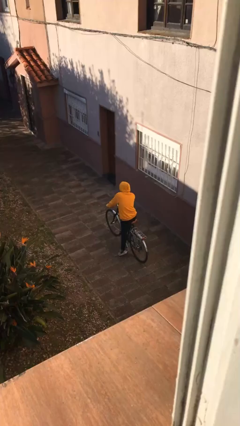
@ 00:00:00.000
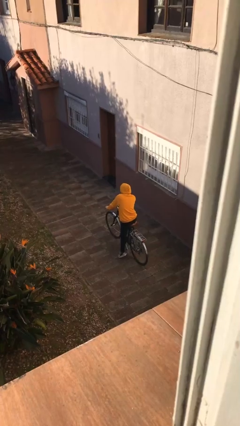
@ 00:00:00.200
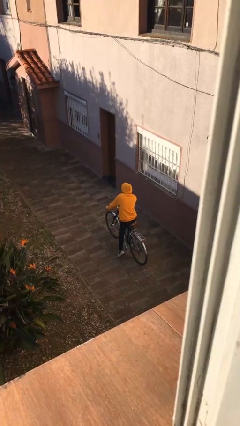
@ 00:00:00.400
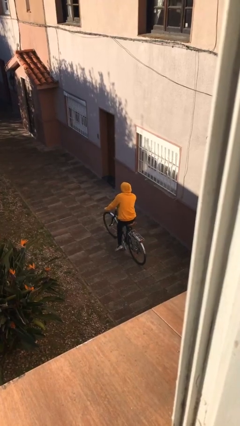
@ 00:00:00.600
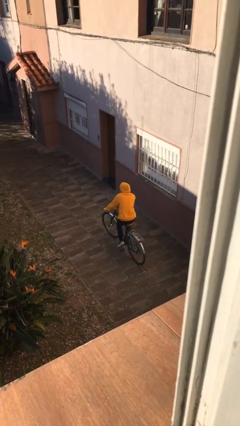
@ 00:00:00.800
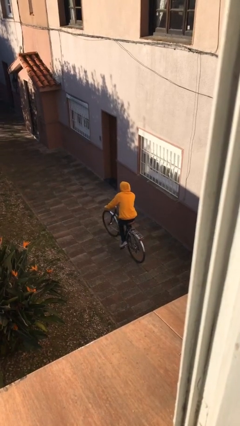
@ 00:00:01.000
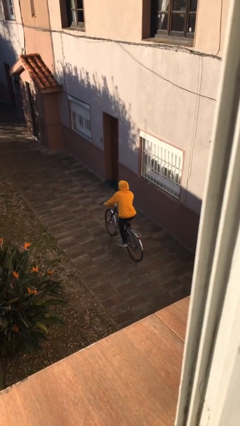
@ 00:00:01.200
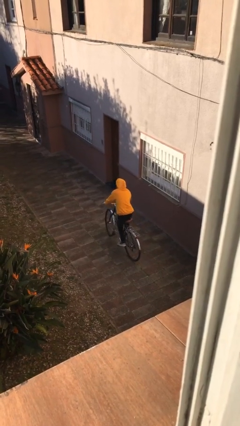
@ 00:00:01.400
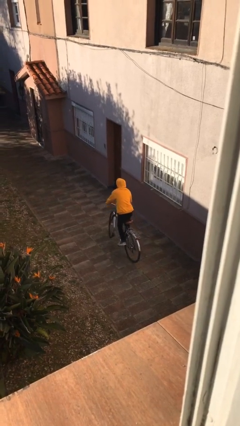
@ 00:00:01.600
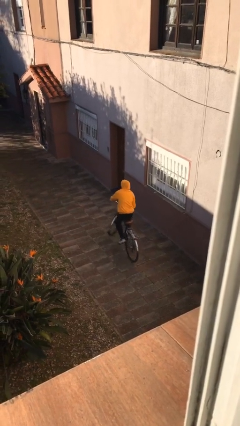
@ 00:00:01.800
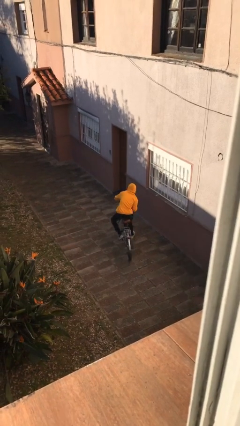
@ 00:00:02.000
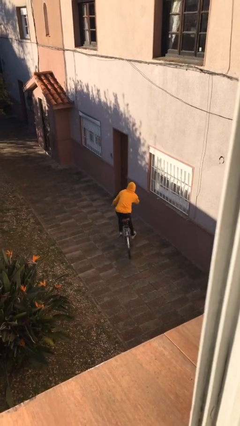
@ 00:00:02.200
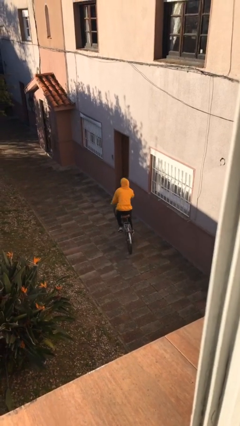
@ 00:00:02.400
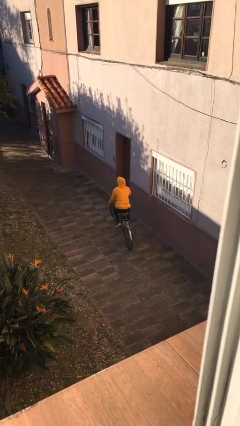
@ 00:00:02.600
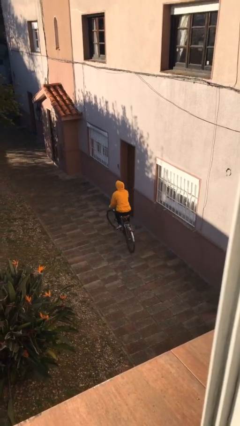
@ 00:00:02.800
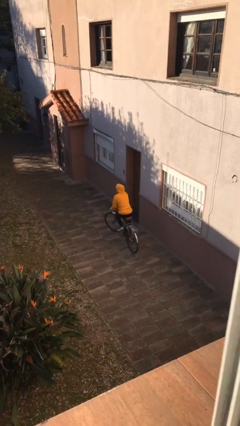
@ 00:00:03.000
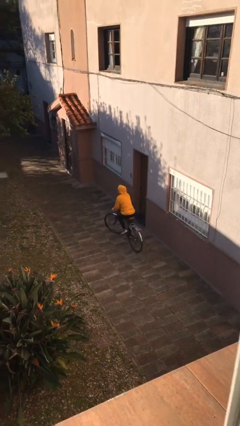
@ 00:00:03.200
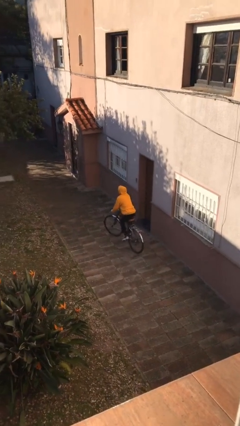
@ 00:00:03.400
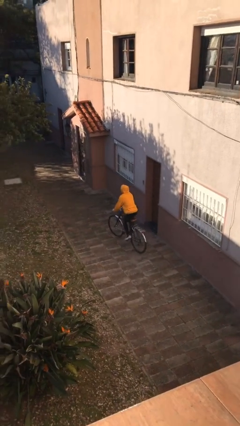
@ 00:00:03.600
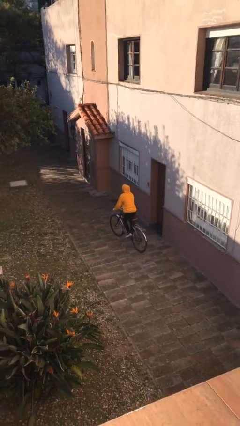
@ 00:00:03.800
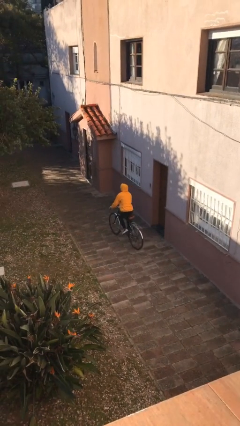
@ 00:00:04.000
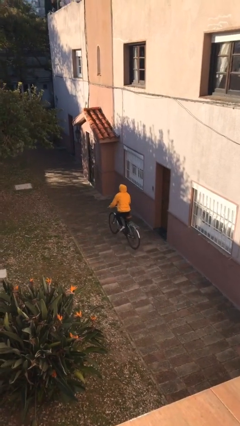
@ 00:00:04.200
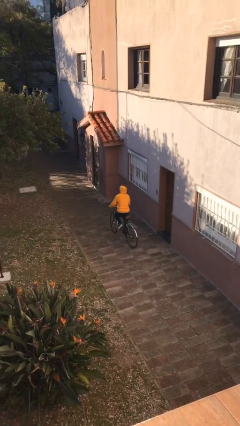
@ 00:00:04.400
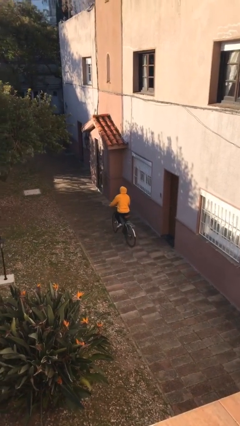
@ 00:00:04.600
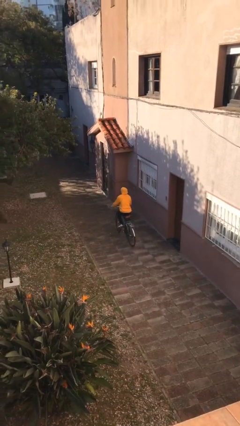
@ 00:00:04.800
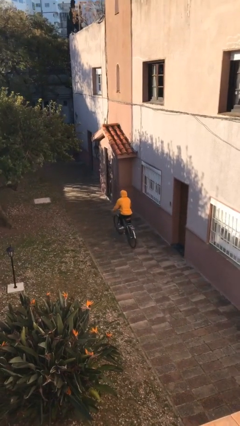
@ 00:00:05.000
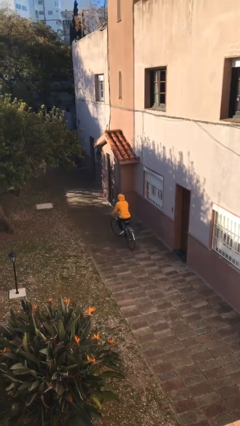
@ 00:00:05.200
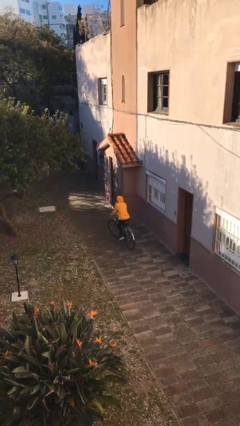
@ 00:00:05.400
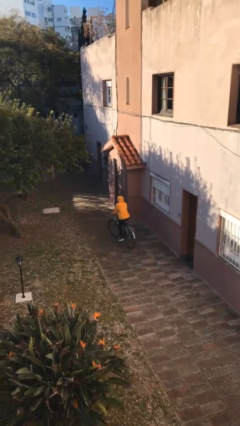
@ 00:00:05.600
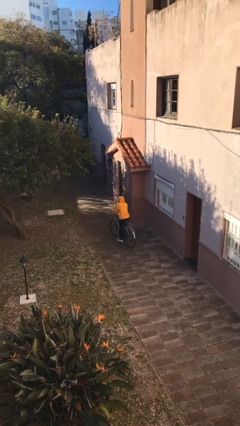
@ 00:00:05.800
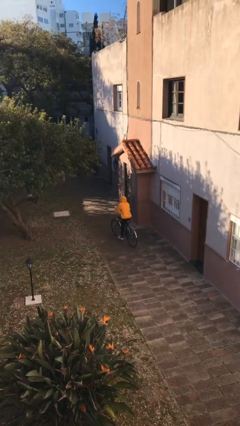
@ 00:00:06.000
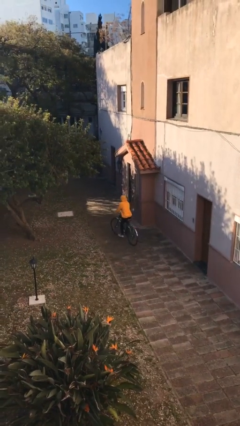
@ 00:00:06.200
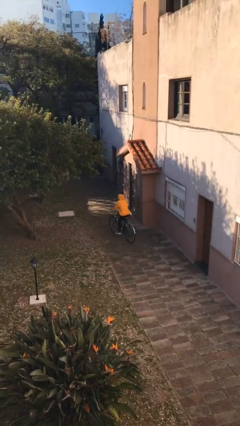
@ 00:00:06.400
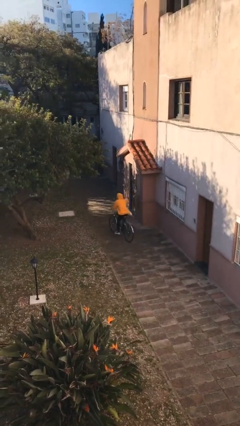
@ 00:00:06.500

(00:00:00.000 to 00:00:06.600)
person rides bicycle

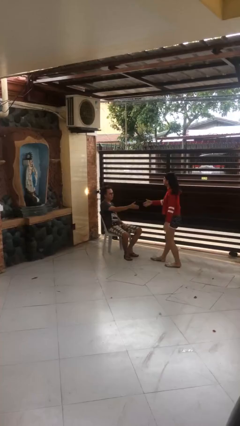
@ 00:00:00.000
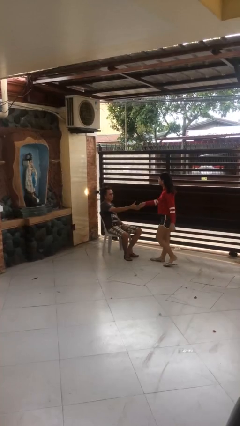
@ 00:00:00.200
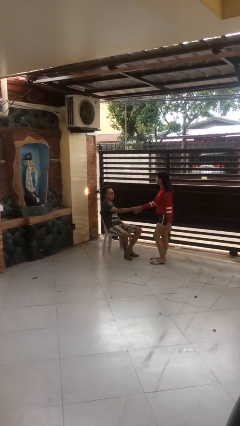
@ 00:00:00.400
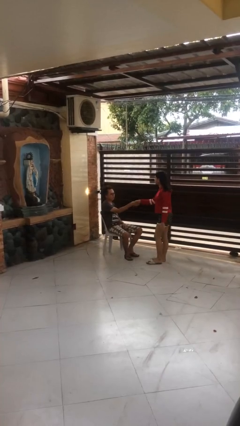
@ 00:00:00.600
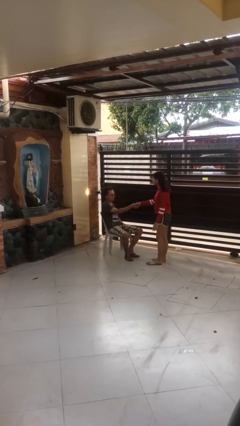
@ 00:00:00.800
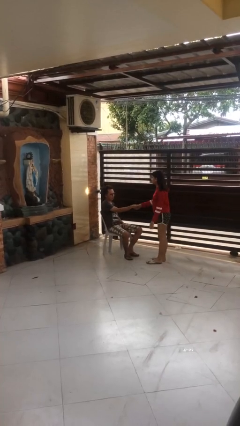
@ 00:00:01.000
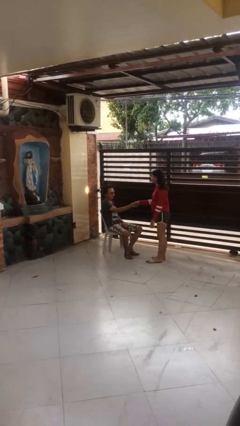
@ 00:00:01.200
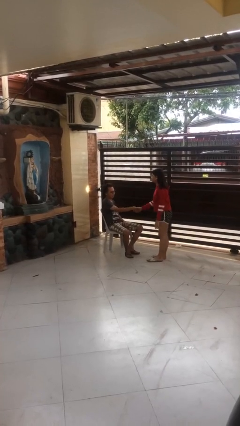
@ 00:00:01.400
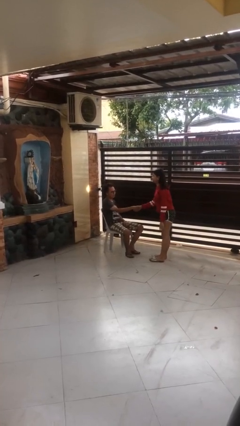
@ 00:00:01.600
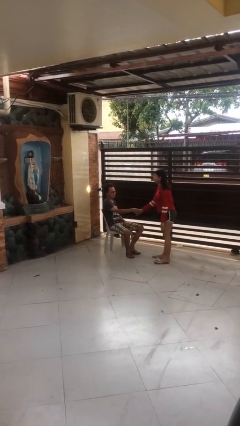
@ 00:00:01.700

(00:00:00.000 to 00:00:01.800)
person shakes hand

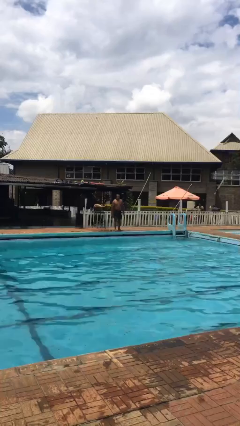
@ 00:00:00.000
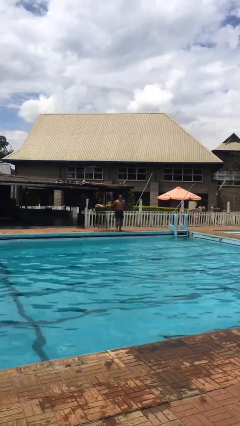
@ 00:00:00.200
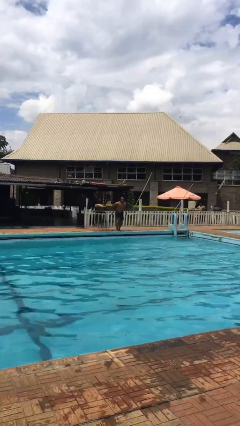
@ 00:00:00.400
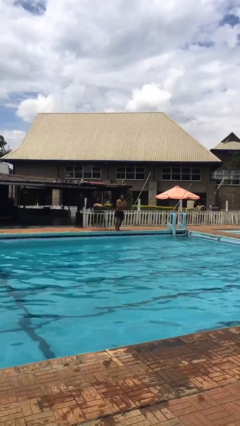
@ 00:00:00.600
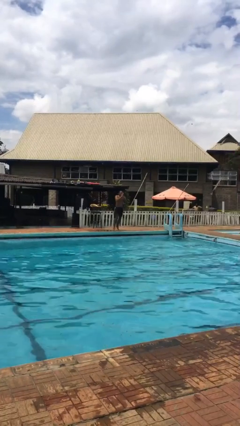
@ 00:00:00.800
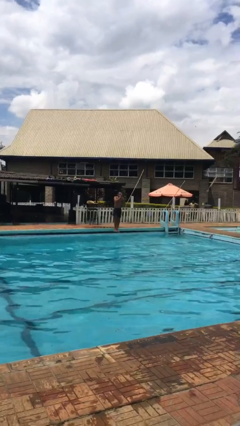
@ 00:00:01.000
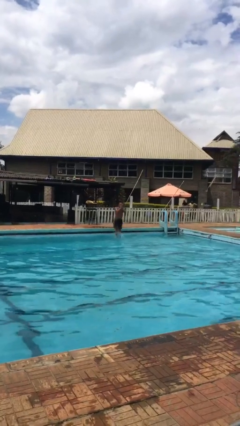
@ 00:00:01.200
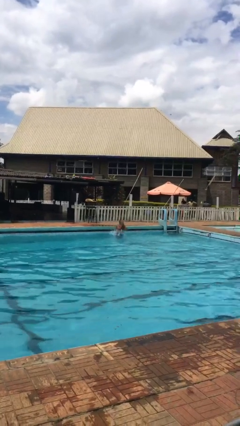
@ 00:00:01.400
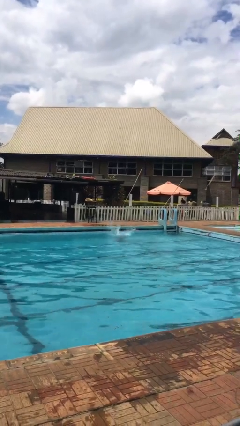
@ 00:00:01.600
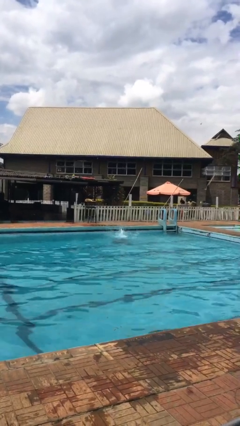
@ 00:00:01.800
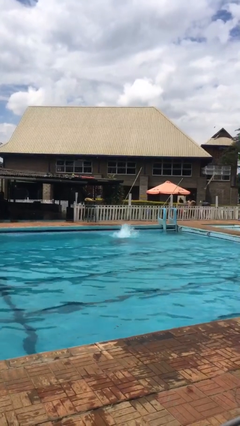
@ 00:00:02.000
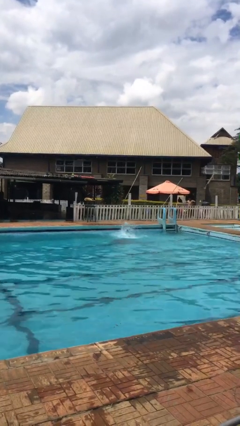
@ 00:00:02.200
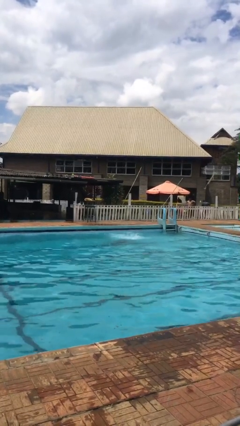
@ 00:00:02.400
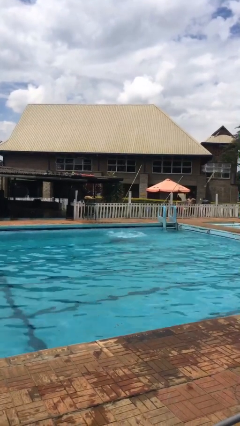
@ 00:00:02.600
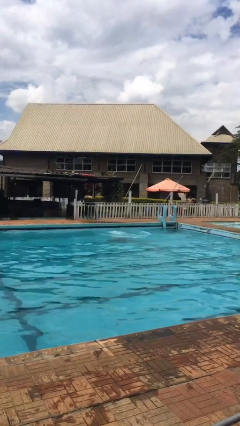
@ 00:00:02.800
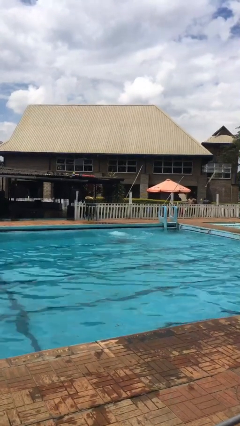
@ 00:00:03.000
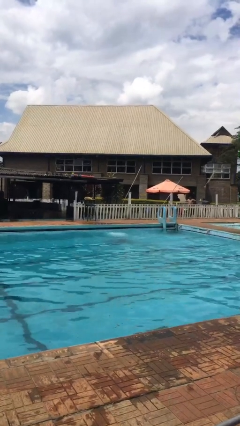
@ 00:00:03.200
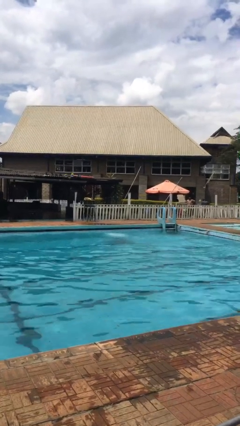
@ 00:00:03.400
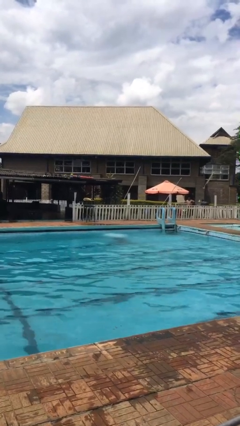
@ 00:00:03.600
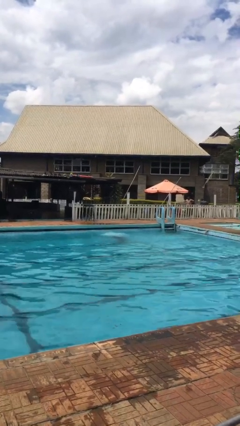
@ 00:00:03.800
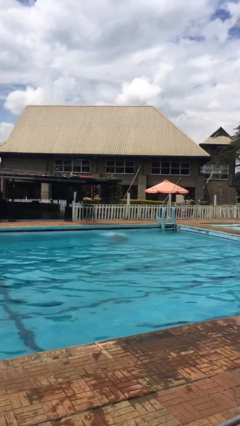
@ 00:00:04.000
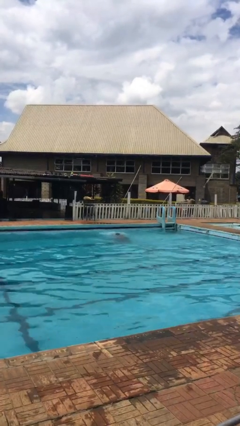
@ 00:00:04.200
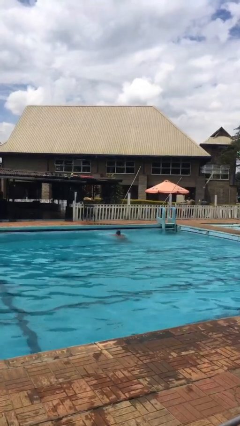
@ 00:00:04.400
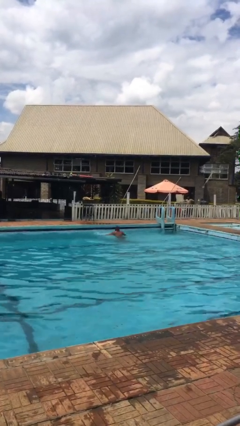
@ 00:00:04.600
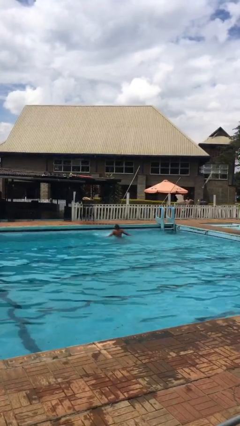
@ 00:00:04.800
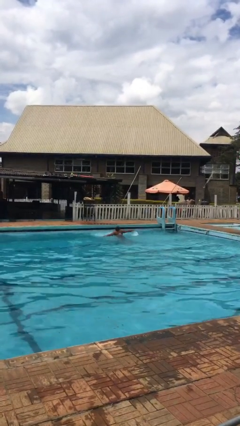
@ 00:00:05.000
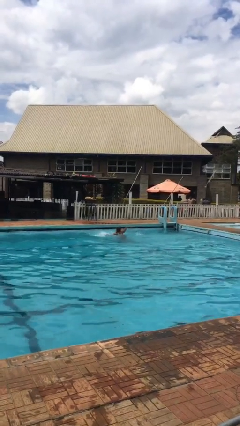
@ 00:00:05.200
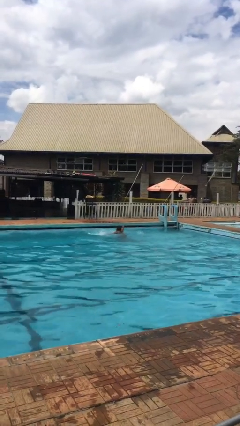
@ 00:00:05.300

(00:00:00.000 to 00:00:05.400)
person jumps into pool

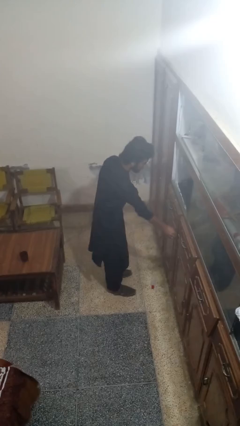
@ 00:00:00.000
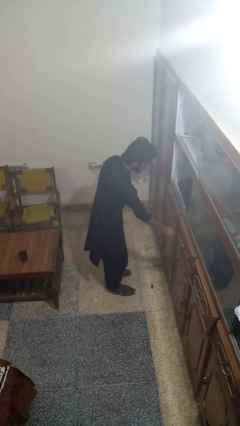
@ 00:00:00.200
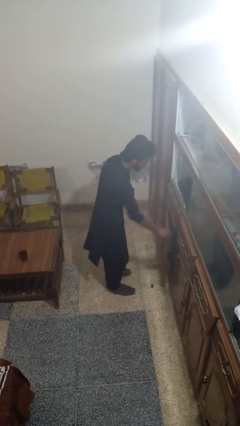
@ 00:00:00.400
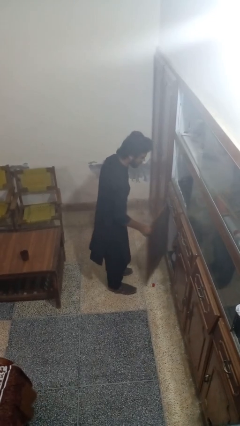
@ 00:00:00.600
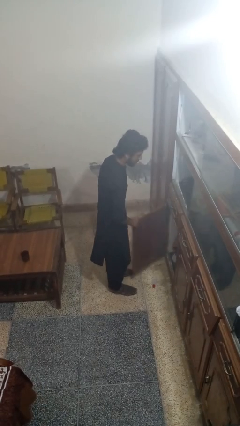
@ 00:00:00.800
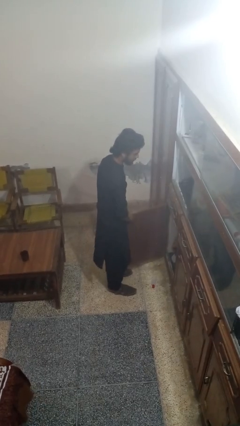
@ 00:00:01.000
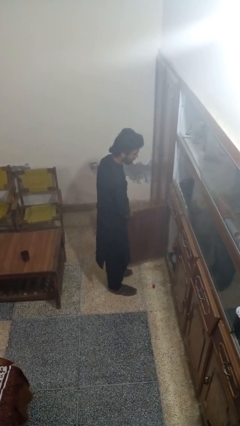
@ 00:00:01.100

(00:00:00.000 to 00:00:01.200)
person opens cabinet

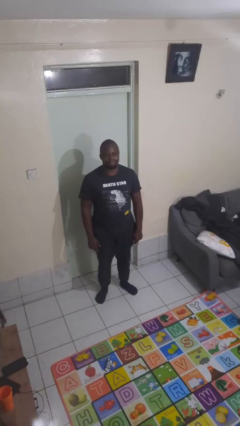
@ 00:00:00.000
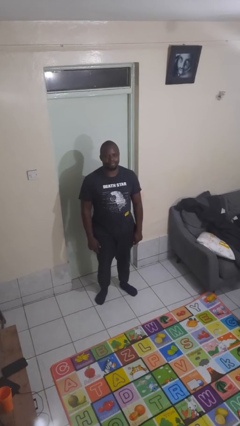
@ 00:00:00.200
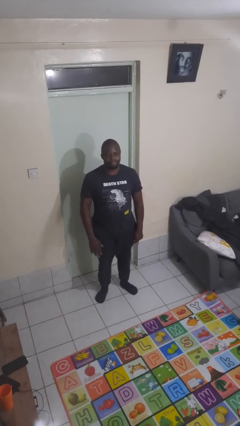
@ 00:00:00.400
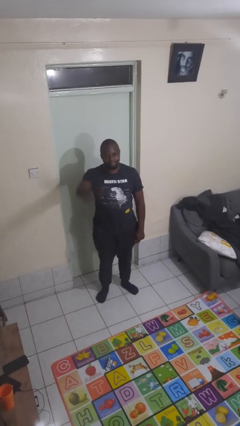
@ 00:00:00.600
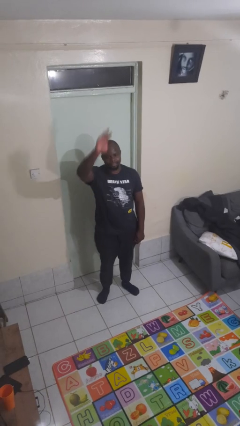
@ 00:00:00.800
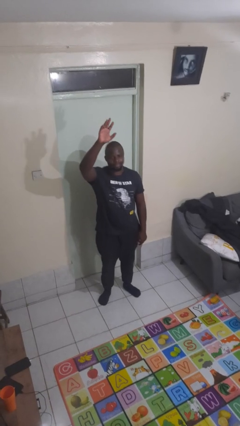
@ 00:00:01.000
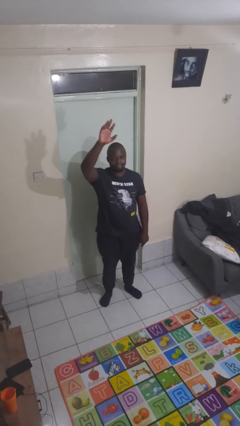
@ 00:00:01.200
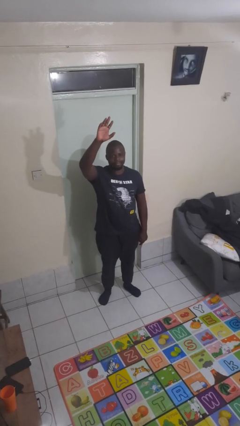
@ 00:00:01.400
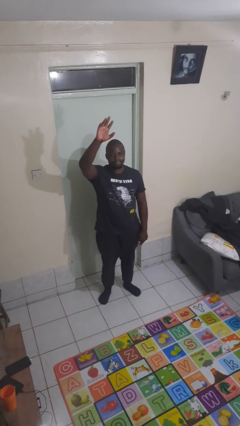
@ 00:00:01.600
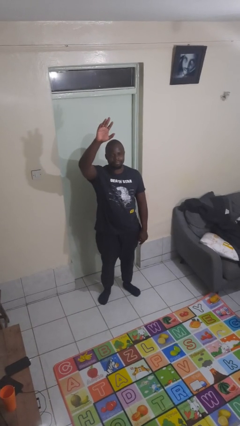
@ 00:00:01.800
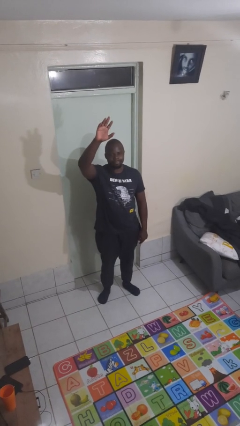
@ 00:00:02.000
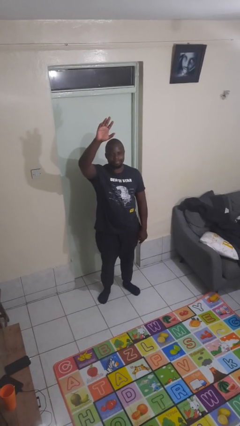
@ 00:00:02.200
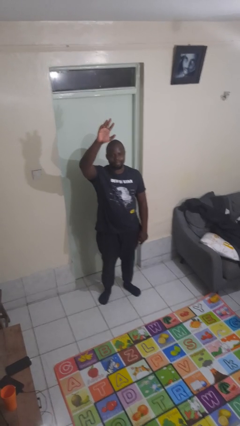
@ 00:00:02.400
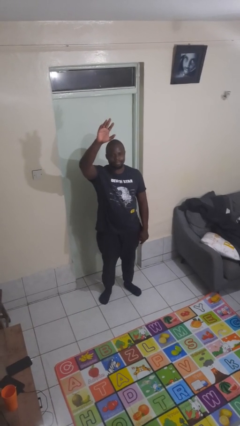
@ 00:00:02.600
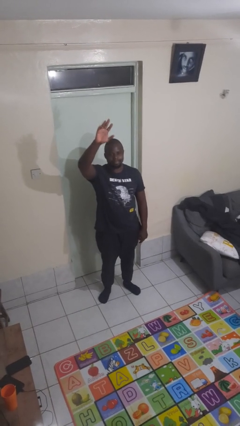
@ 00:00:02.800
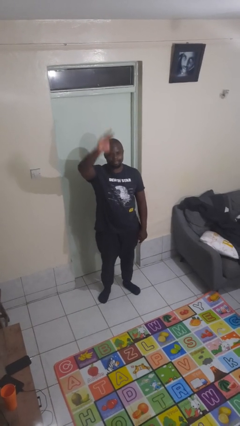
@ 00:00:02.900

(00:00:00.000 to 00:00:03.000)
person gestures raise hand
